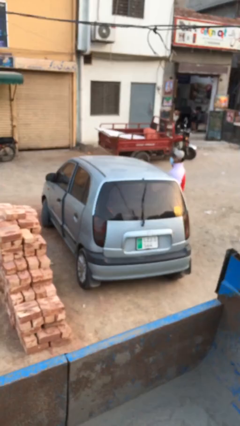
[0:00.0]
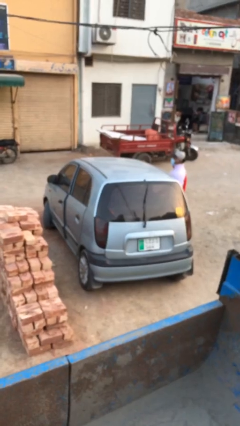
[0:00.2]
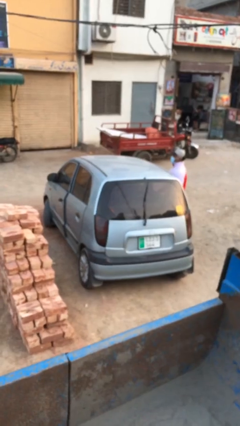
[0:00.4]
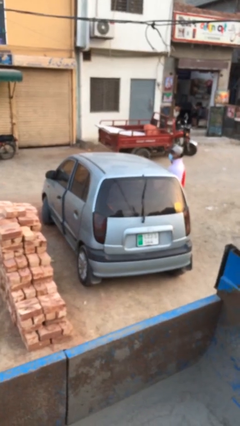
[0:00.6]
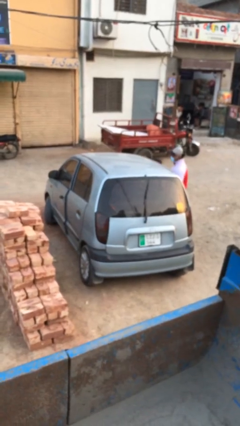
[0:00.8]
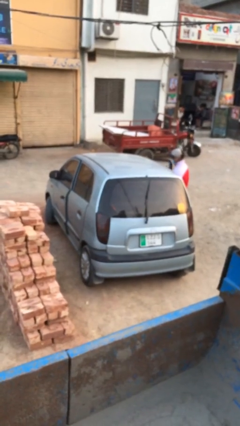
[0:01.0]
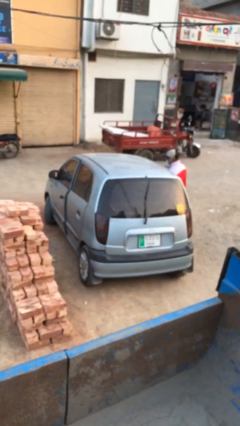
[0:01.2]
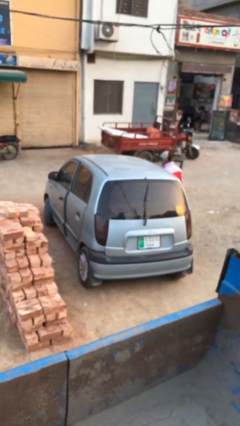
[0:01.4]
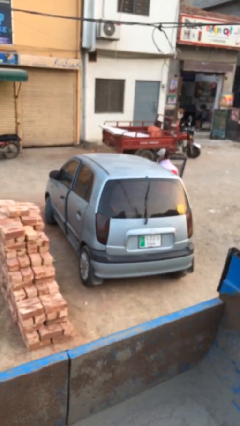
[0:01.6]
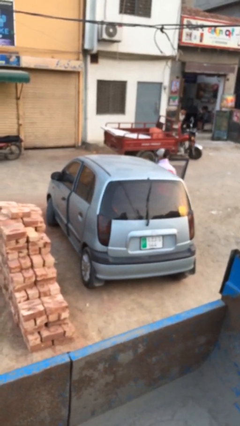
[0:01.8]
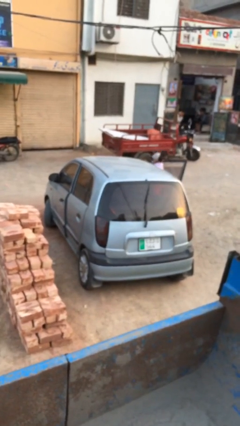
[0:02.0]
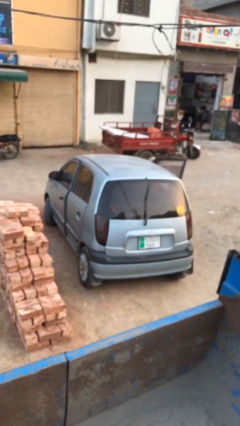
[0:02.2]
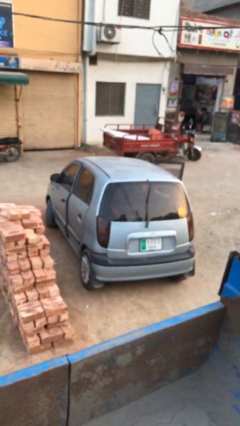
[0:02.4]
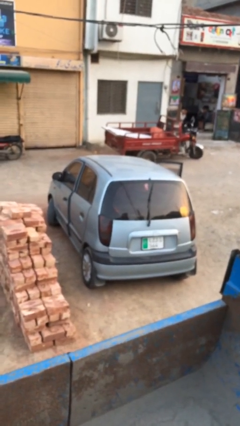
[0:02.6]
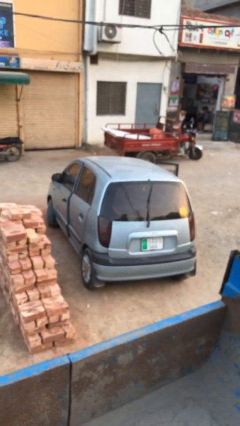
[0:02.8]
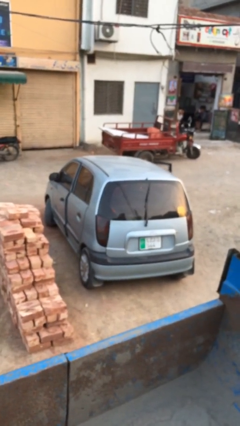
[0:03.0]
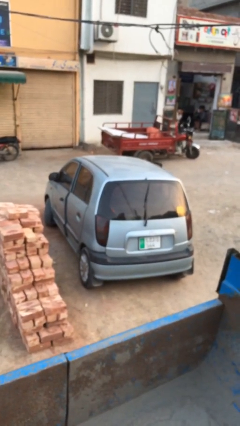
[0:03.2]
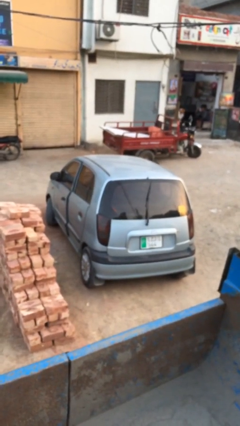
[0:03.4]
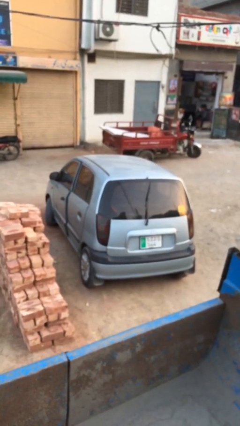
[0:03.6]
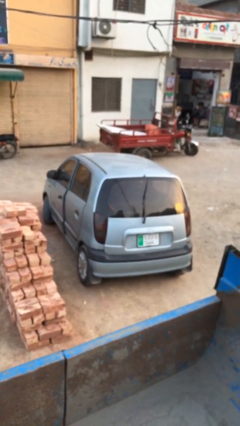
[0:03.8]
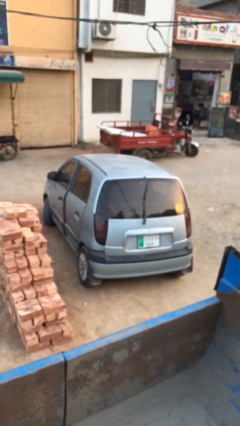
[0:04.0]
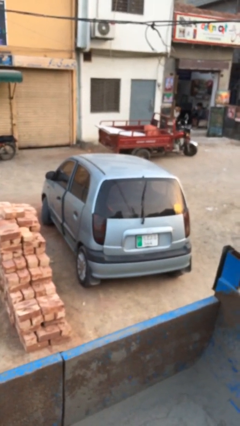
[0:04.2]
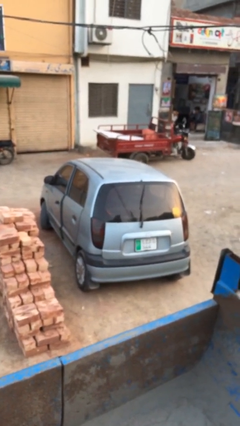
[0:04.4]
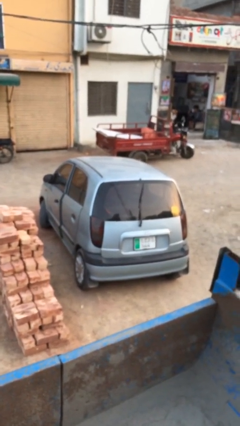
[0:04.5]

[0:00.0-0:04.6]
car picks up person

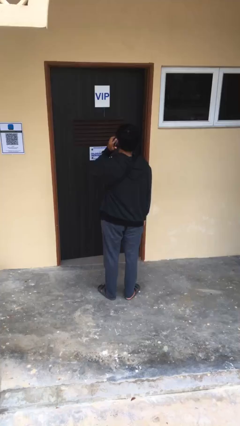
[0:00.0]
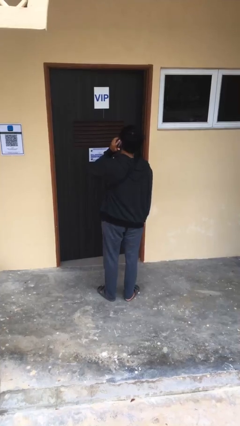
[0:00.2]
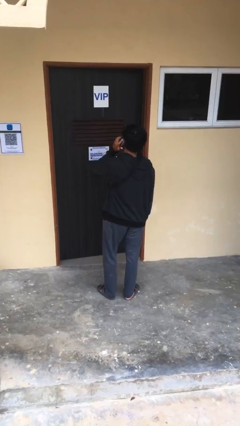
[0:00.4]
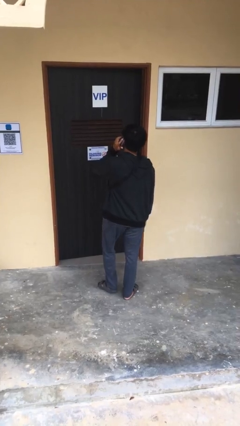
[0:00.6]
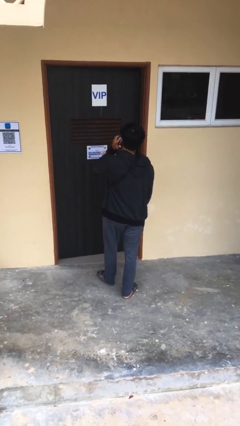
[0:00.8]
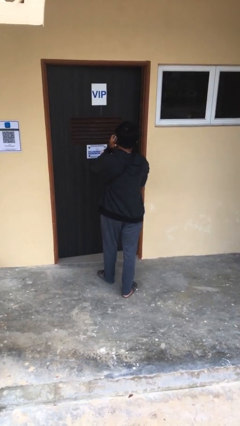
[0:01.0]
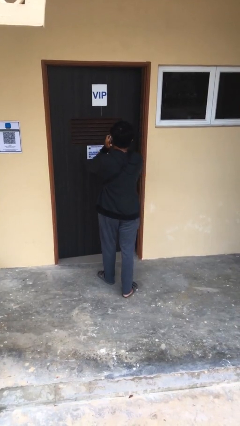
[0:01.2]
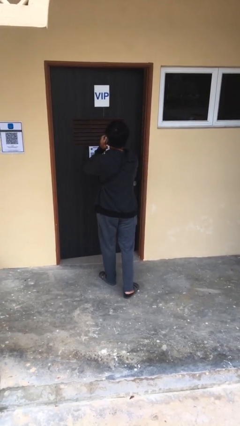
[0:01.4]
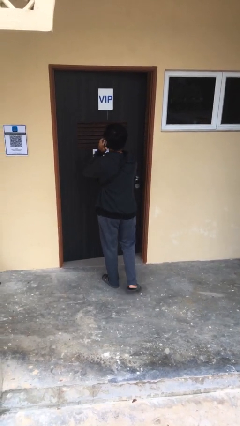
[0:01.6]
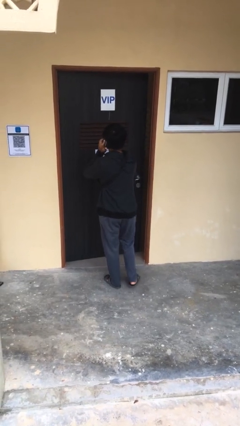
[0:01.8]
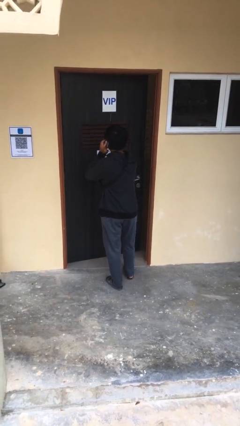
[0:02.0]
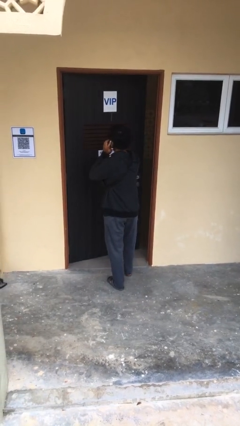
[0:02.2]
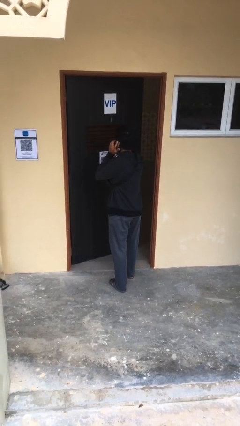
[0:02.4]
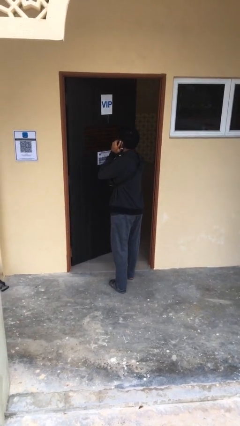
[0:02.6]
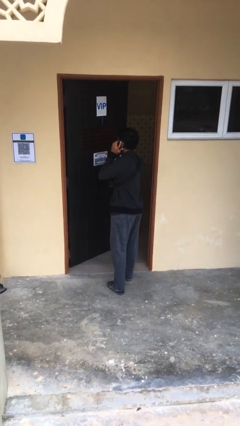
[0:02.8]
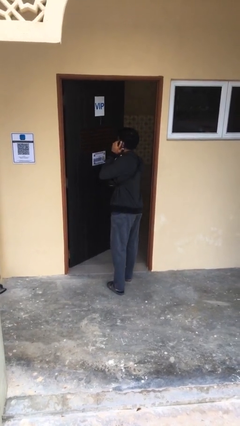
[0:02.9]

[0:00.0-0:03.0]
person opens facility door

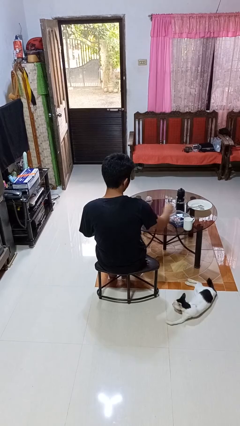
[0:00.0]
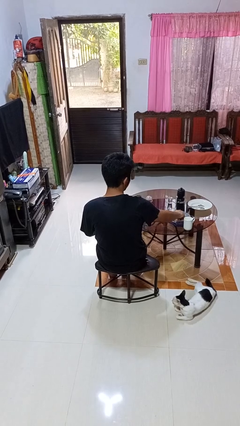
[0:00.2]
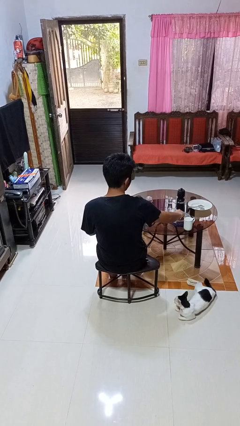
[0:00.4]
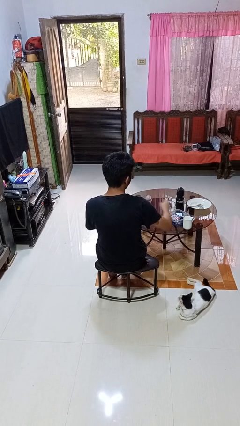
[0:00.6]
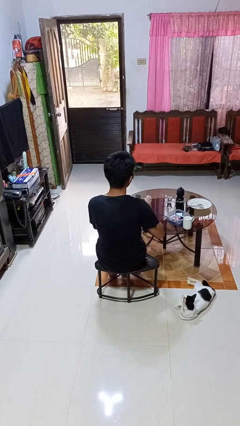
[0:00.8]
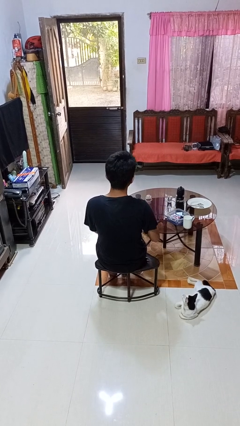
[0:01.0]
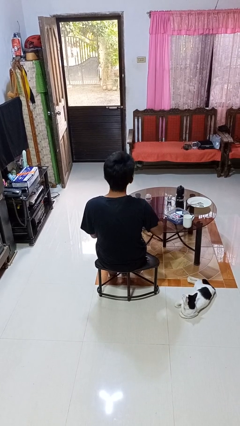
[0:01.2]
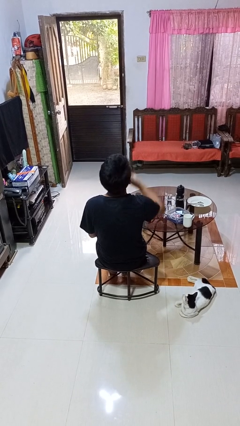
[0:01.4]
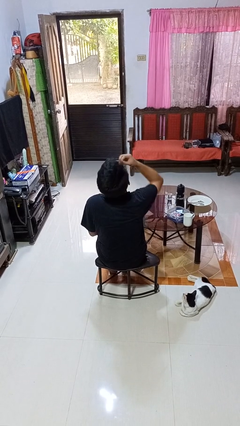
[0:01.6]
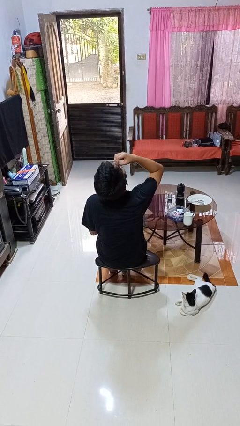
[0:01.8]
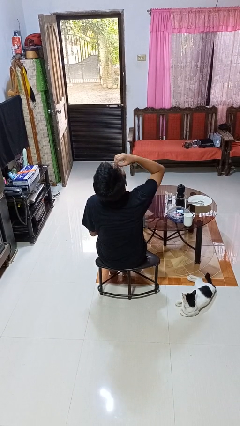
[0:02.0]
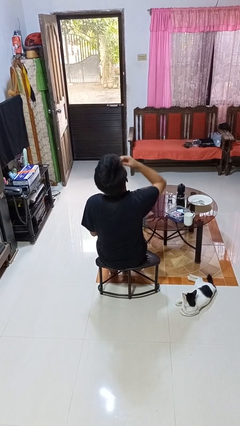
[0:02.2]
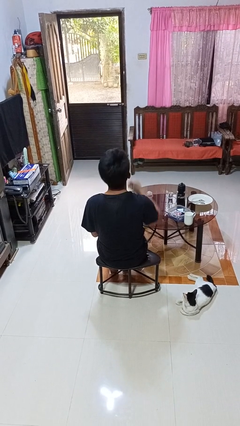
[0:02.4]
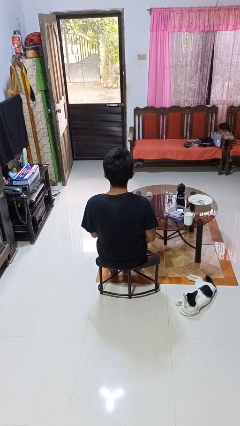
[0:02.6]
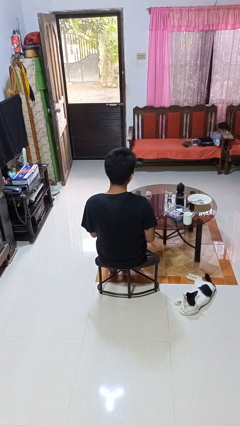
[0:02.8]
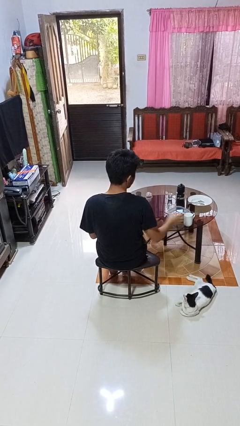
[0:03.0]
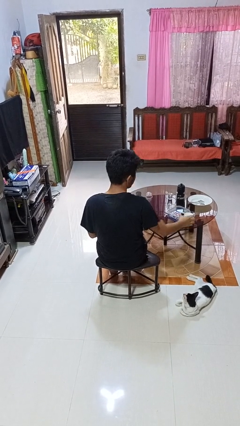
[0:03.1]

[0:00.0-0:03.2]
person takes medicine pills

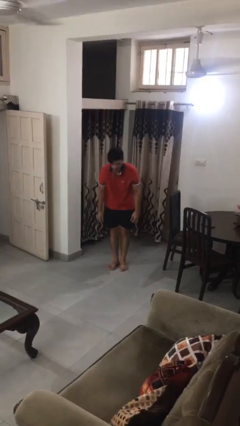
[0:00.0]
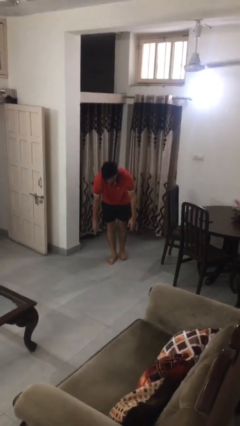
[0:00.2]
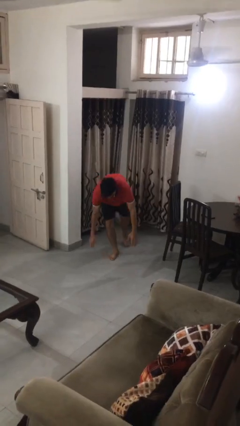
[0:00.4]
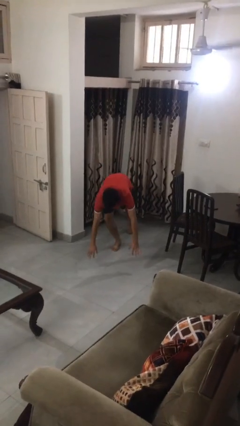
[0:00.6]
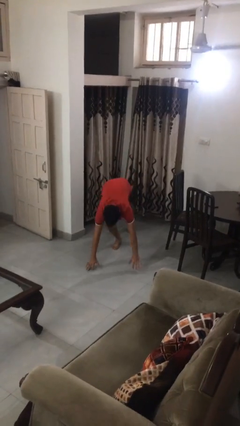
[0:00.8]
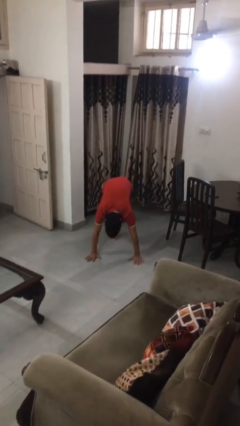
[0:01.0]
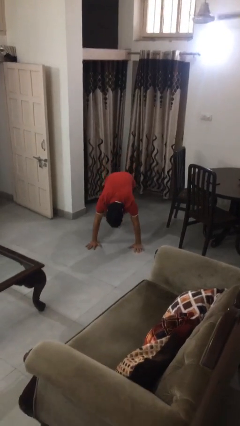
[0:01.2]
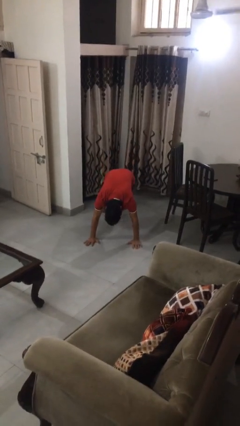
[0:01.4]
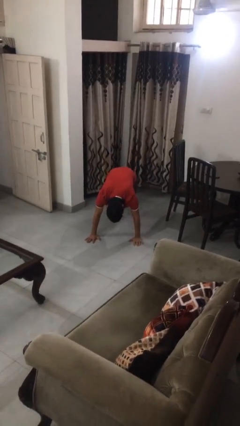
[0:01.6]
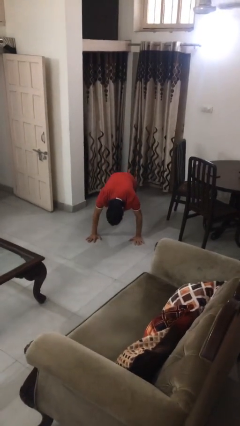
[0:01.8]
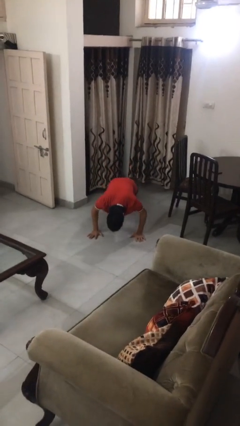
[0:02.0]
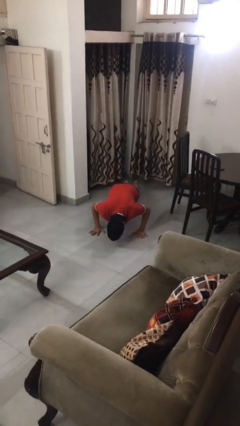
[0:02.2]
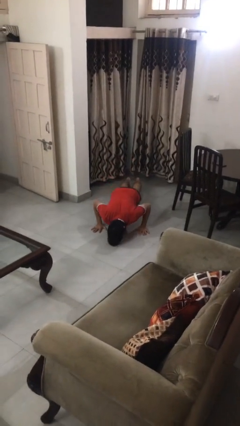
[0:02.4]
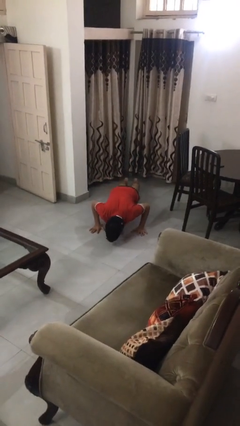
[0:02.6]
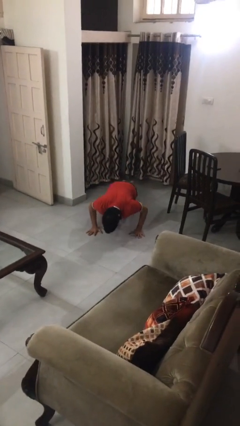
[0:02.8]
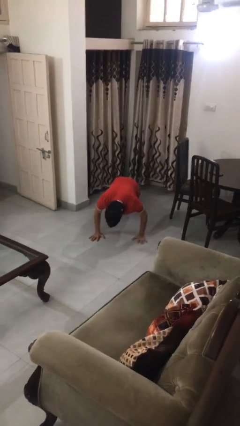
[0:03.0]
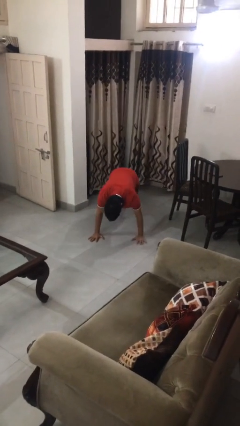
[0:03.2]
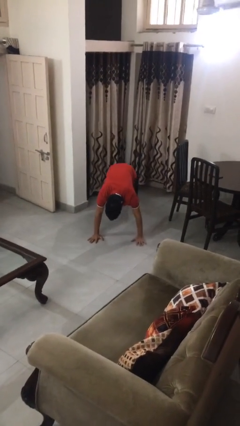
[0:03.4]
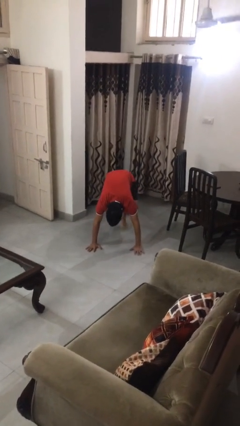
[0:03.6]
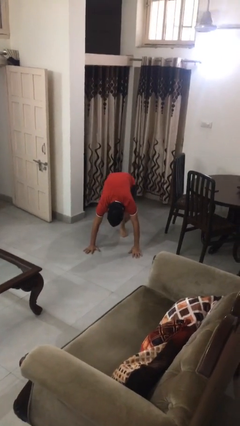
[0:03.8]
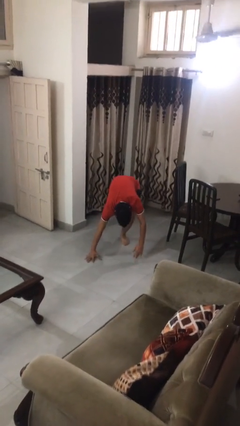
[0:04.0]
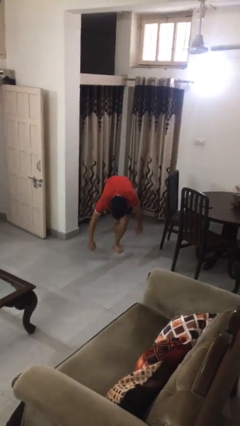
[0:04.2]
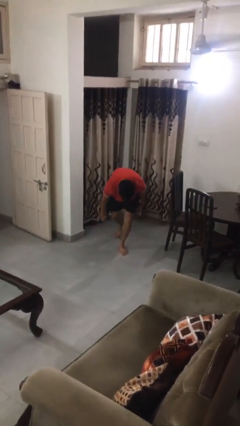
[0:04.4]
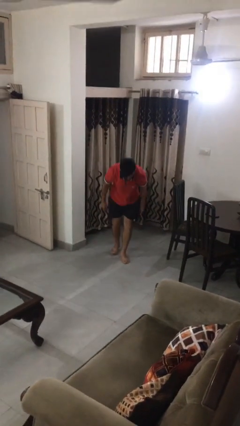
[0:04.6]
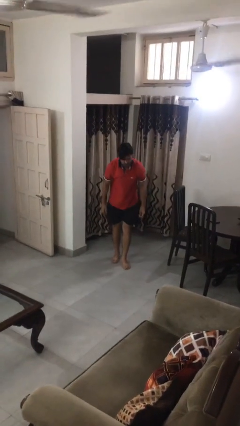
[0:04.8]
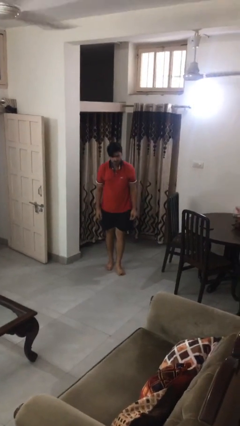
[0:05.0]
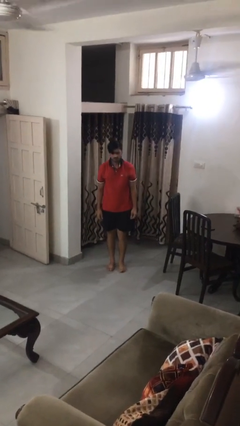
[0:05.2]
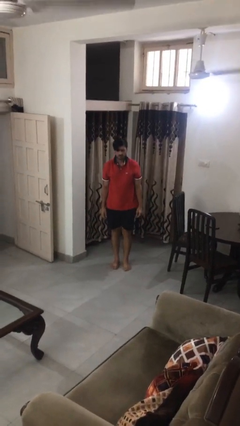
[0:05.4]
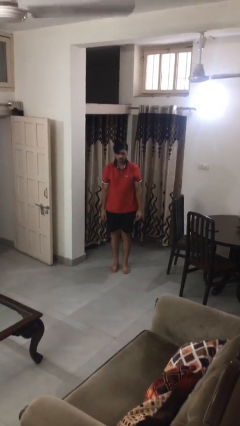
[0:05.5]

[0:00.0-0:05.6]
person exercises with pushup

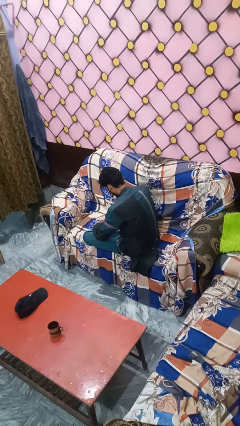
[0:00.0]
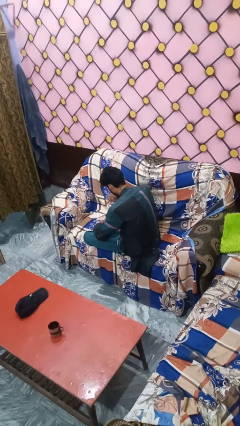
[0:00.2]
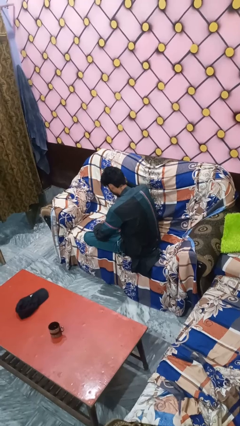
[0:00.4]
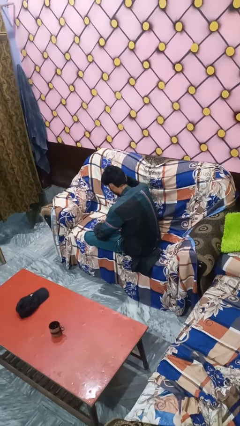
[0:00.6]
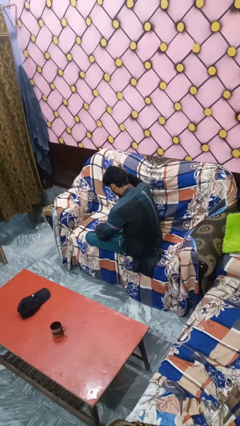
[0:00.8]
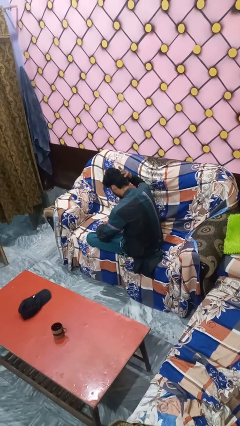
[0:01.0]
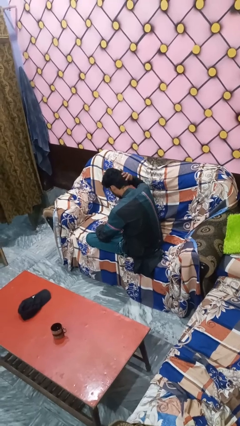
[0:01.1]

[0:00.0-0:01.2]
person pats head
